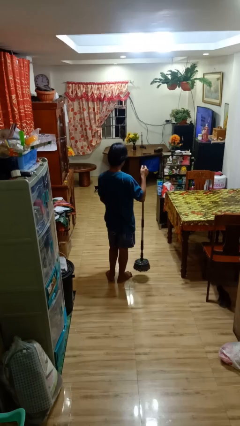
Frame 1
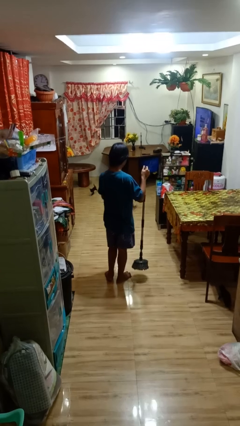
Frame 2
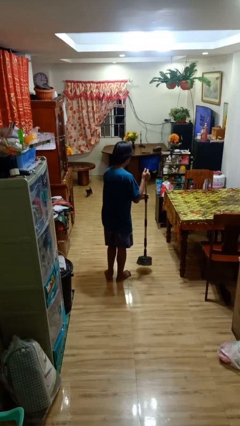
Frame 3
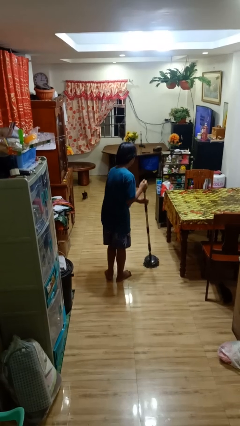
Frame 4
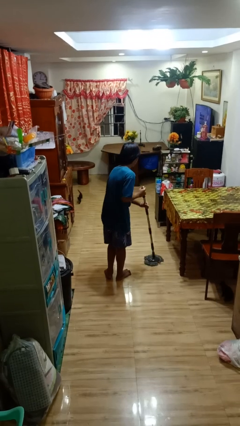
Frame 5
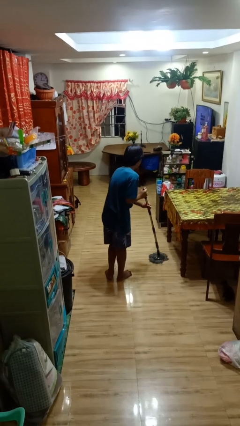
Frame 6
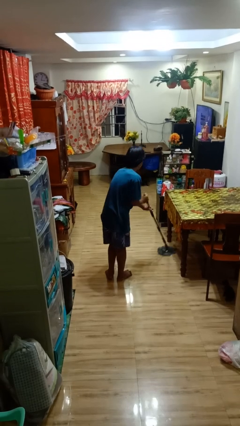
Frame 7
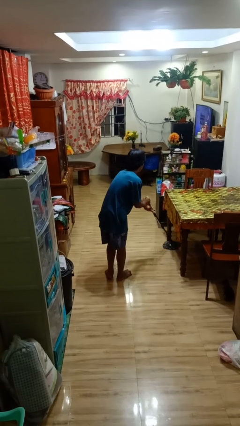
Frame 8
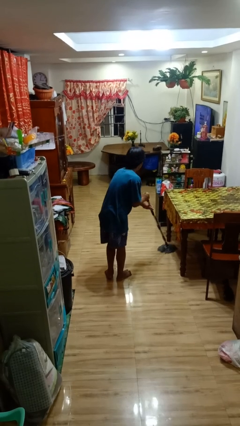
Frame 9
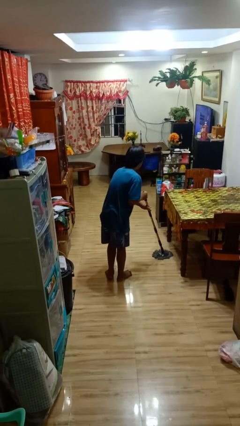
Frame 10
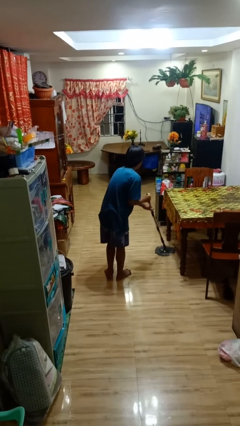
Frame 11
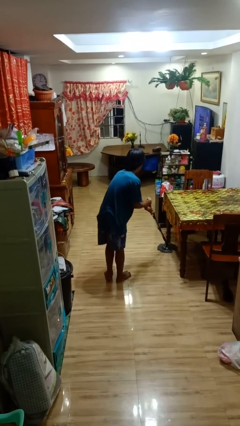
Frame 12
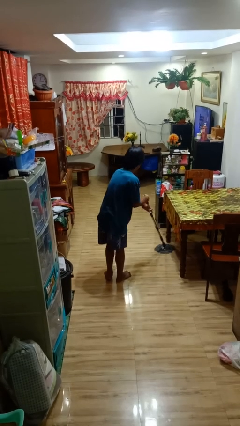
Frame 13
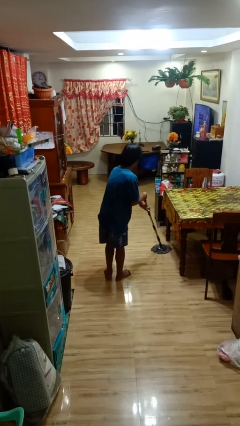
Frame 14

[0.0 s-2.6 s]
person mops

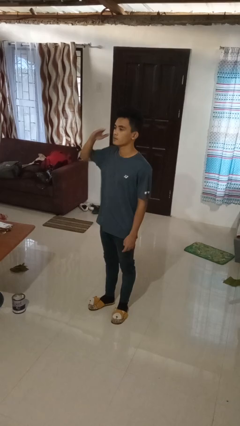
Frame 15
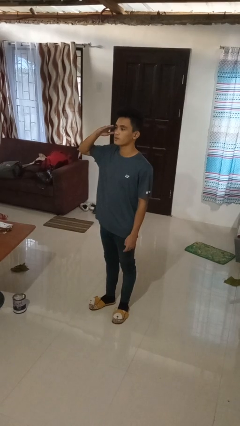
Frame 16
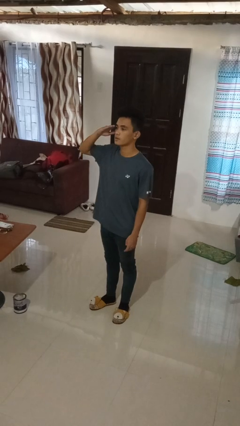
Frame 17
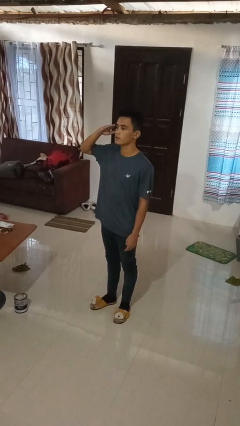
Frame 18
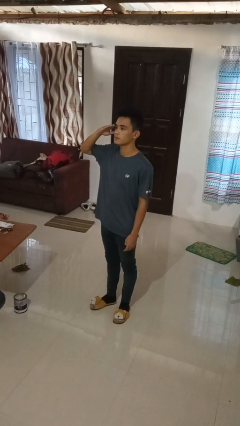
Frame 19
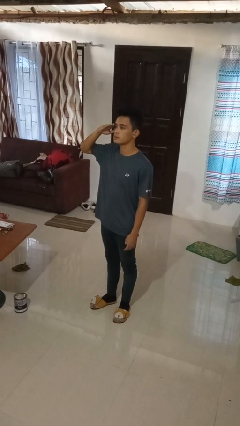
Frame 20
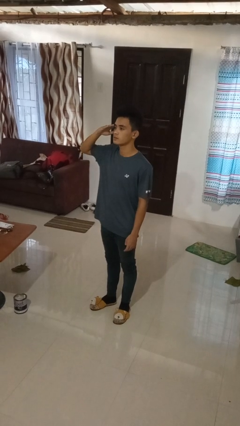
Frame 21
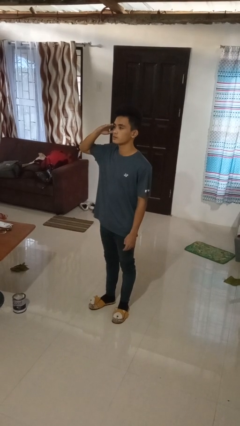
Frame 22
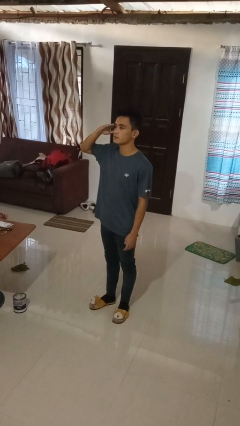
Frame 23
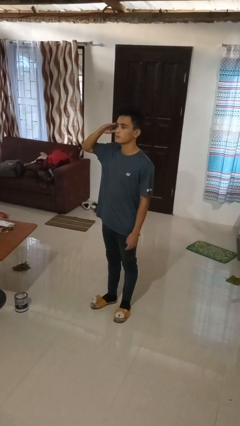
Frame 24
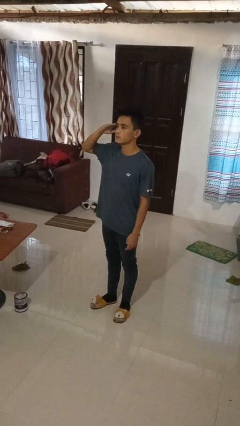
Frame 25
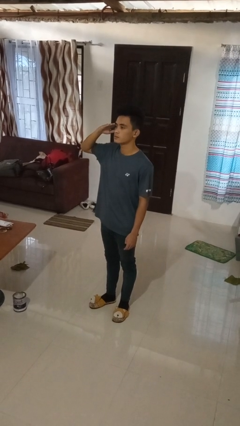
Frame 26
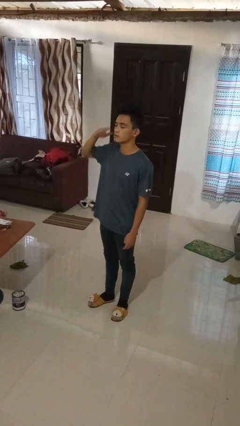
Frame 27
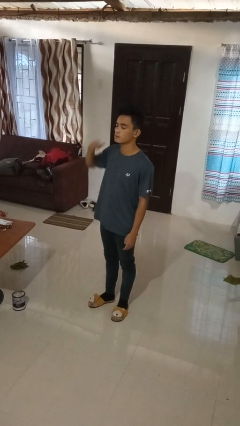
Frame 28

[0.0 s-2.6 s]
person salutes

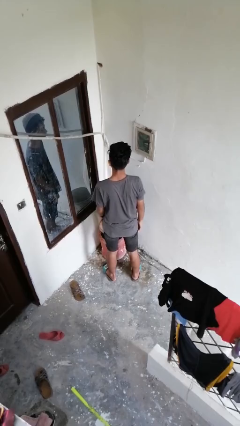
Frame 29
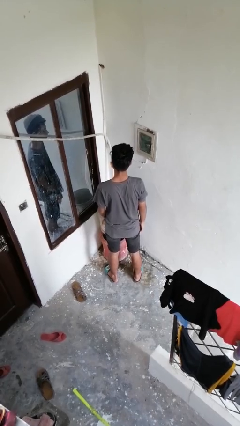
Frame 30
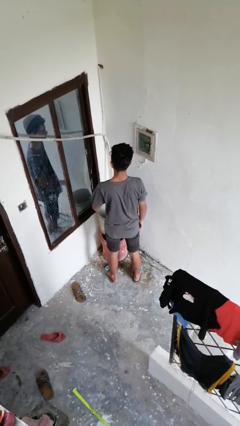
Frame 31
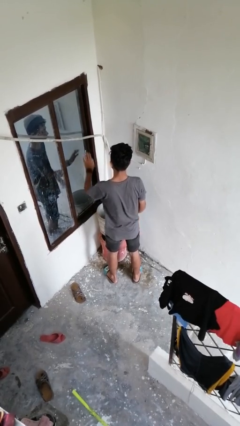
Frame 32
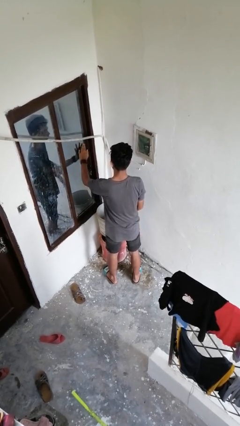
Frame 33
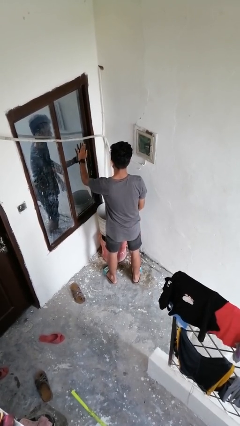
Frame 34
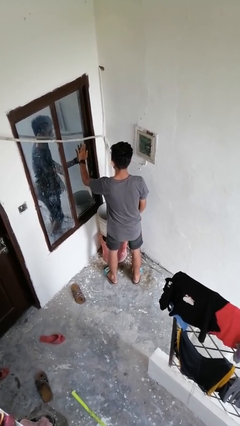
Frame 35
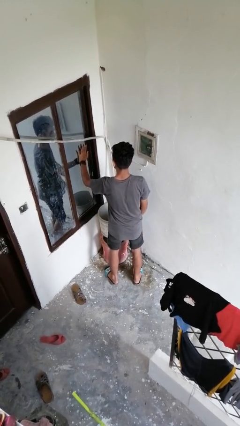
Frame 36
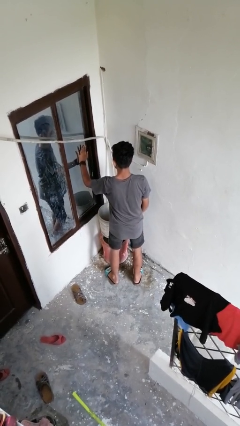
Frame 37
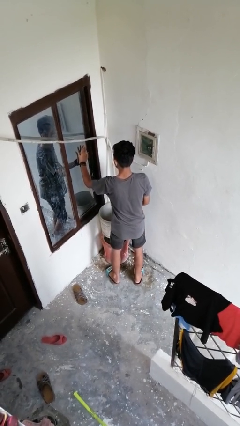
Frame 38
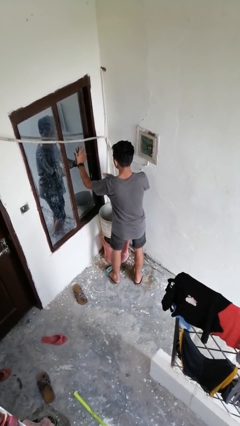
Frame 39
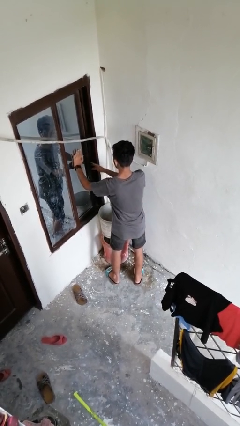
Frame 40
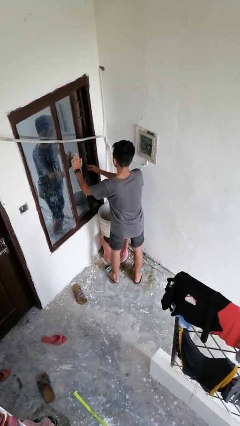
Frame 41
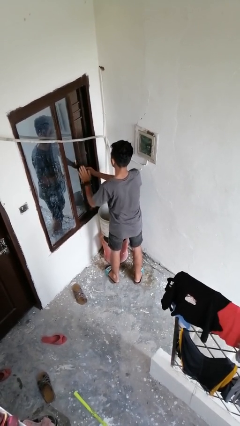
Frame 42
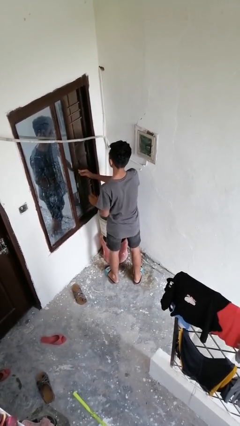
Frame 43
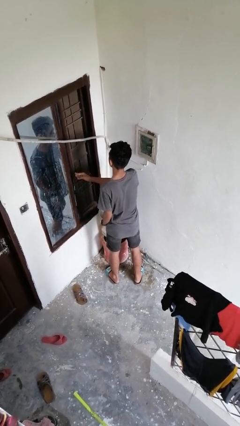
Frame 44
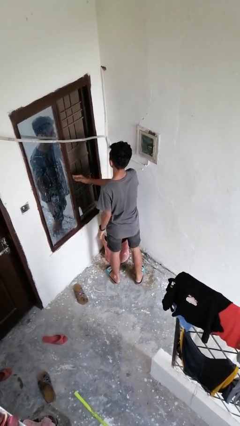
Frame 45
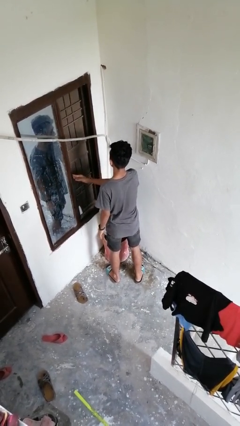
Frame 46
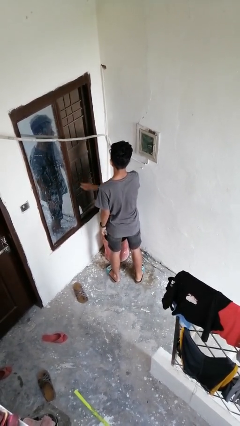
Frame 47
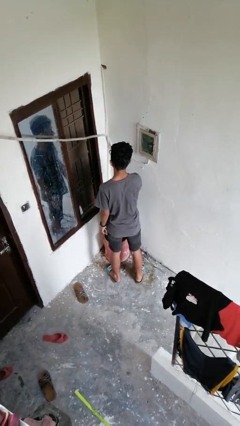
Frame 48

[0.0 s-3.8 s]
person opens home window

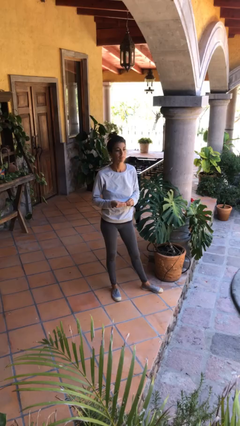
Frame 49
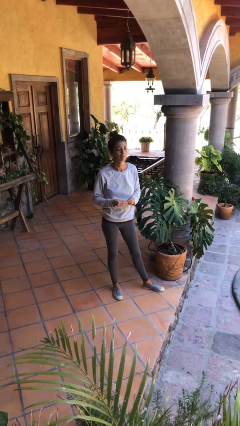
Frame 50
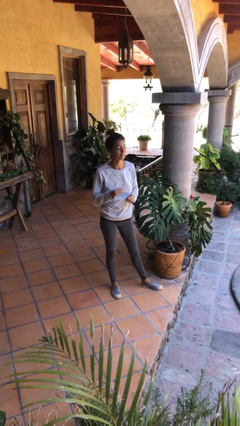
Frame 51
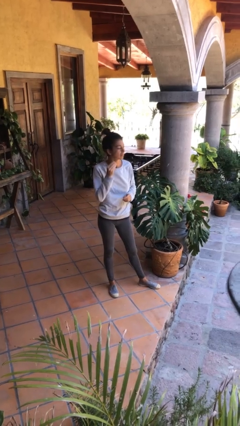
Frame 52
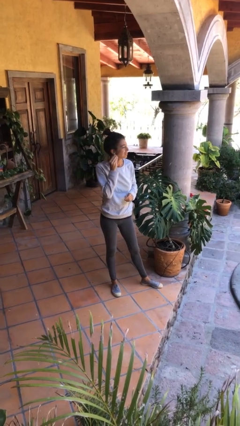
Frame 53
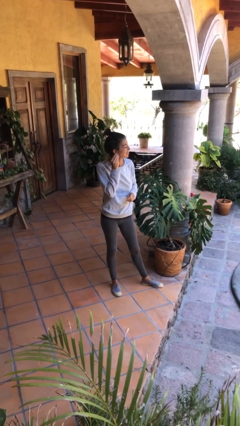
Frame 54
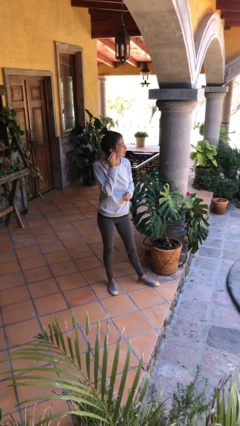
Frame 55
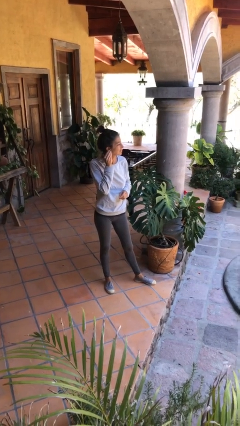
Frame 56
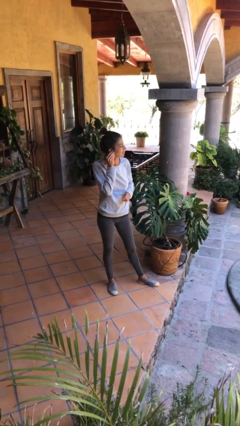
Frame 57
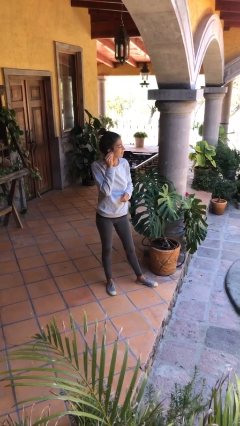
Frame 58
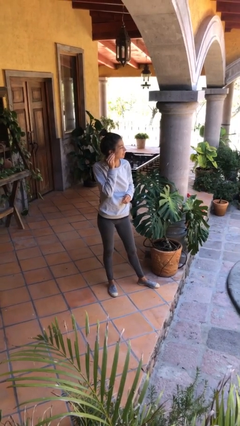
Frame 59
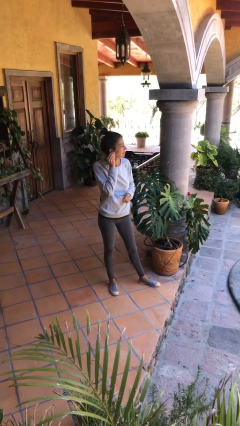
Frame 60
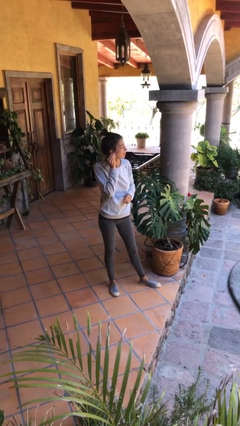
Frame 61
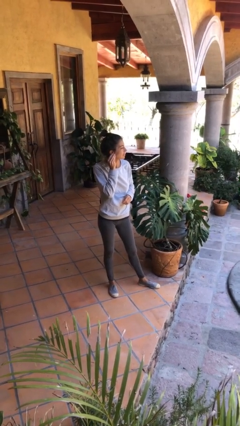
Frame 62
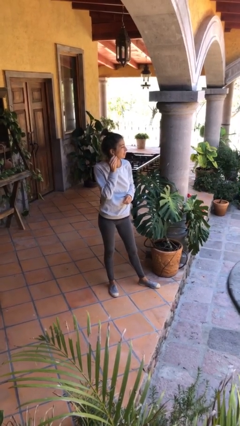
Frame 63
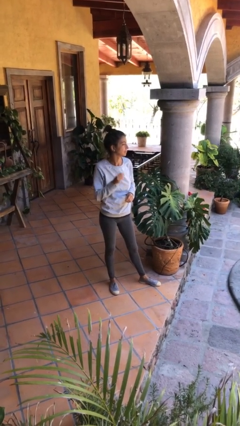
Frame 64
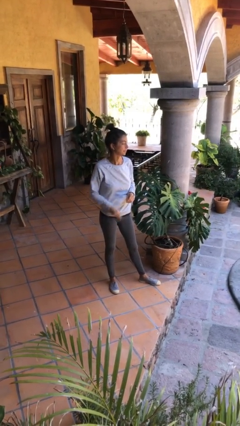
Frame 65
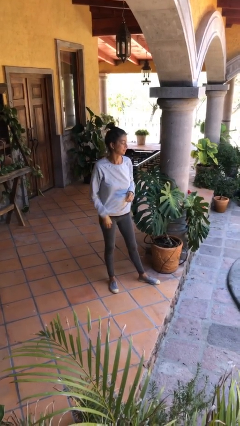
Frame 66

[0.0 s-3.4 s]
person puts on earrings

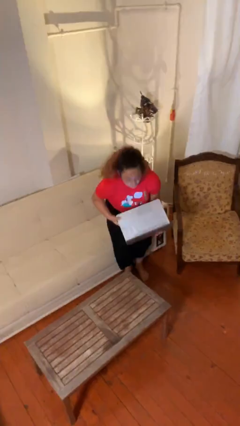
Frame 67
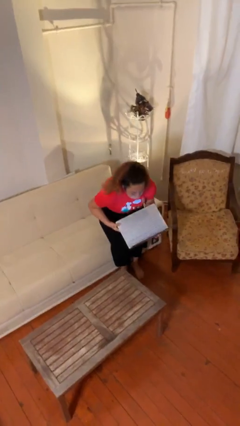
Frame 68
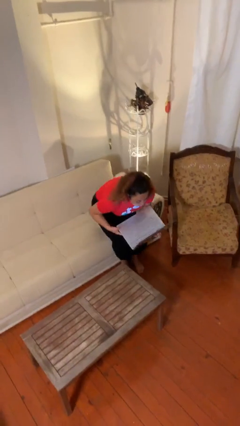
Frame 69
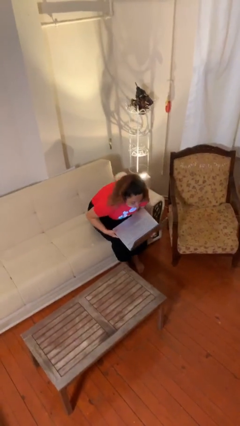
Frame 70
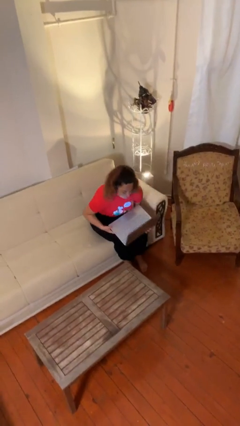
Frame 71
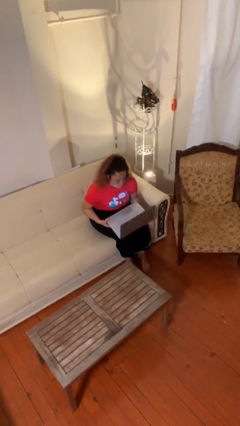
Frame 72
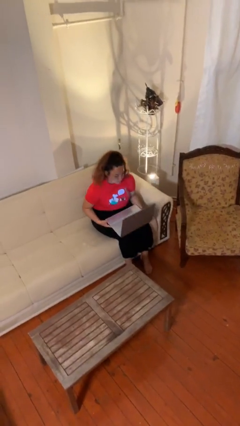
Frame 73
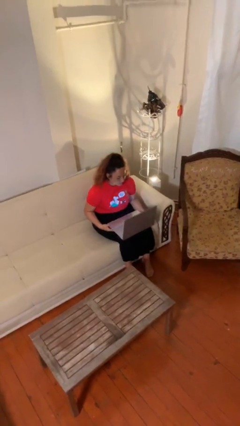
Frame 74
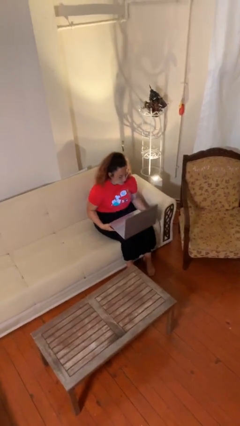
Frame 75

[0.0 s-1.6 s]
person sits down

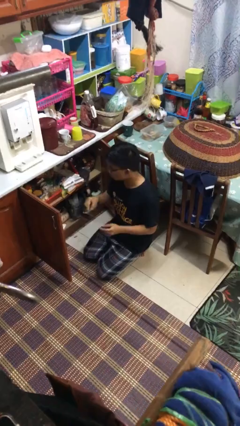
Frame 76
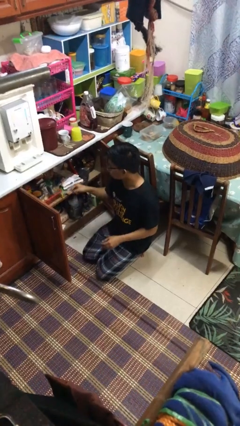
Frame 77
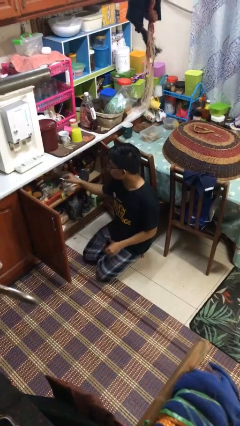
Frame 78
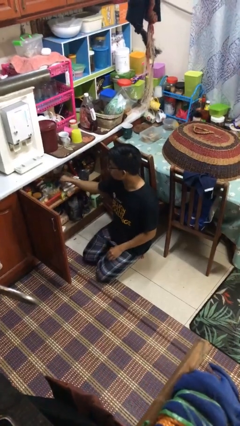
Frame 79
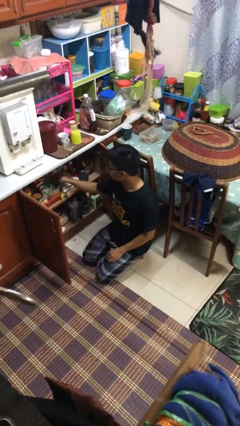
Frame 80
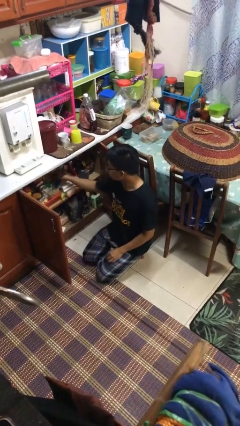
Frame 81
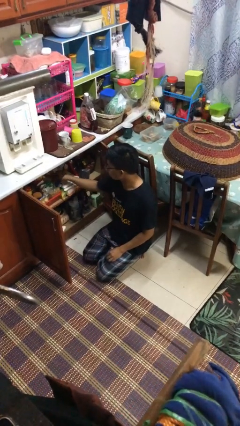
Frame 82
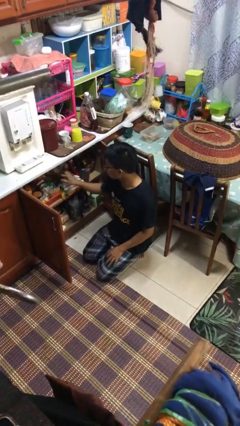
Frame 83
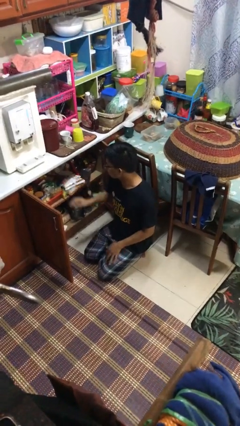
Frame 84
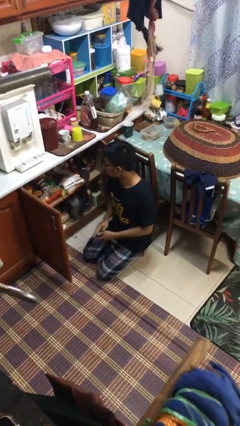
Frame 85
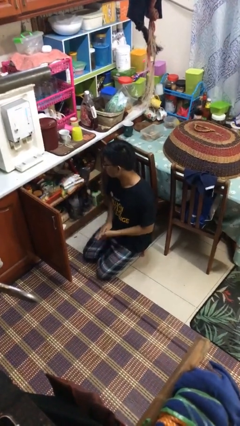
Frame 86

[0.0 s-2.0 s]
person puts object into kitchen drawer

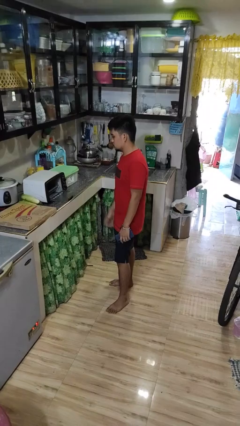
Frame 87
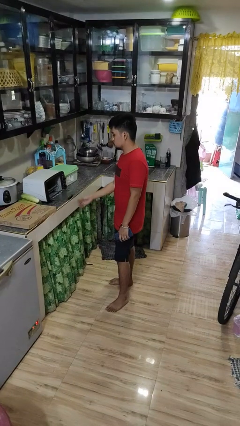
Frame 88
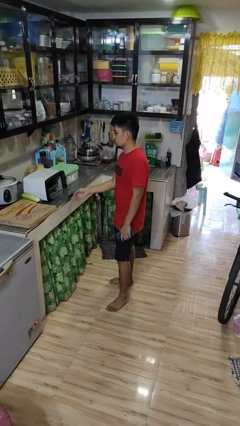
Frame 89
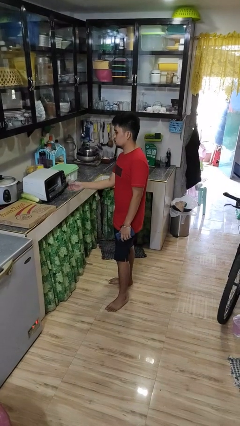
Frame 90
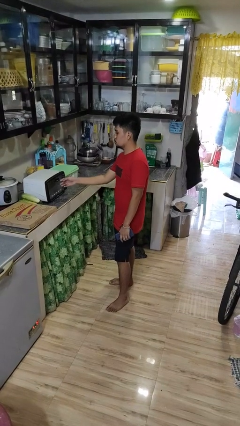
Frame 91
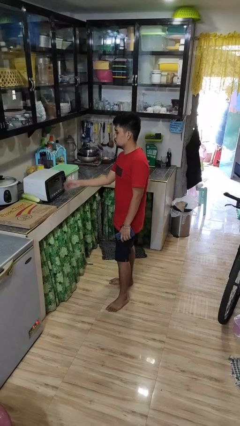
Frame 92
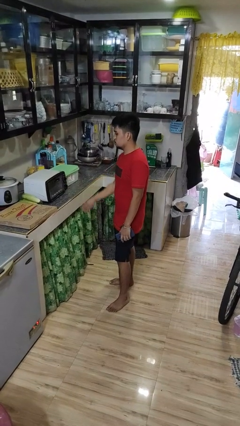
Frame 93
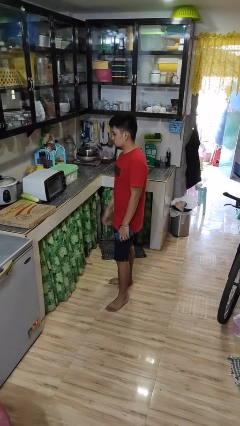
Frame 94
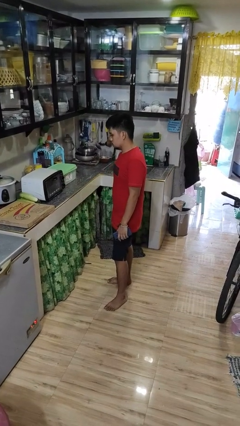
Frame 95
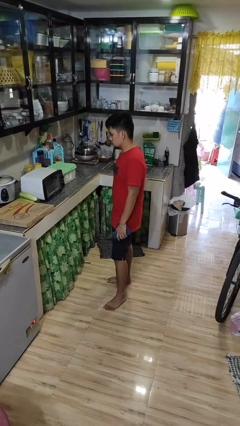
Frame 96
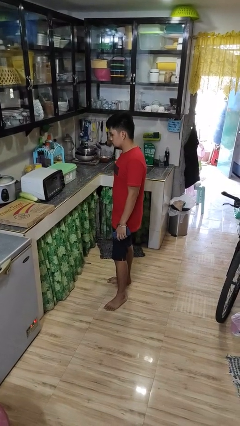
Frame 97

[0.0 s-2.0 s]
person closes microwave
